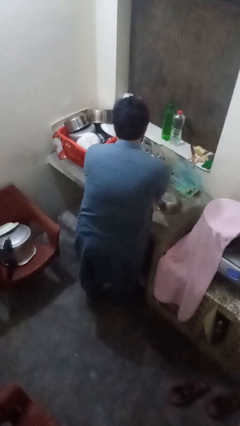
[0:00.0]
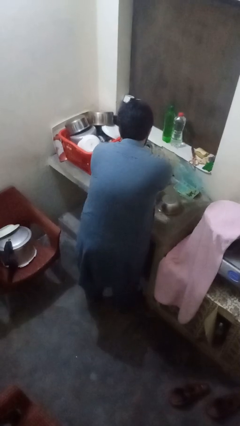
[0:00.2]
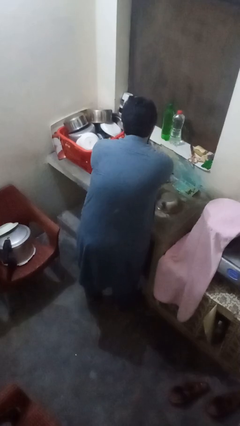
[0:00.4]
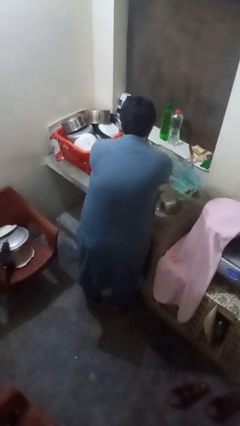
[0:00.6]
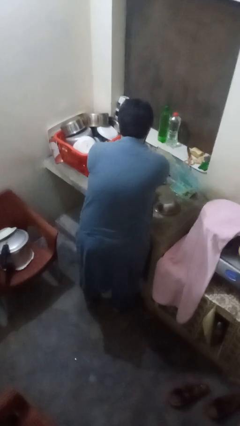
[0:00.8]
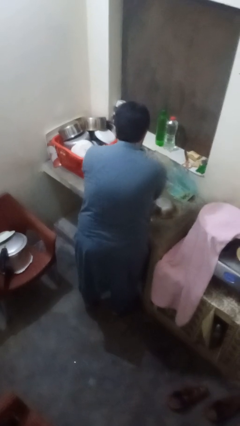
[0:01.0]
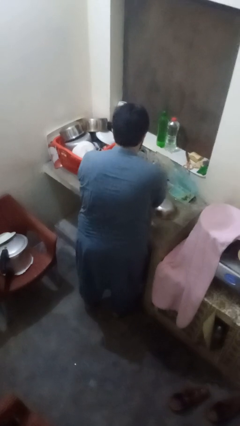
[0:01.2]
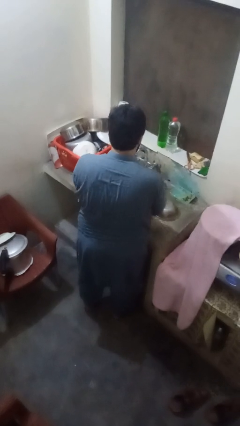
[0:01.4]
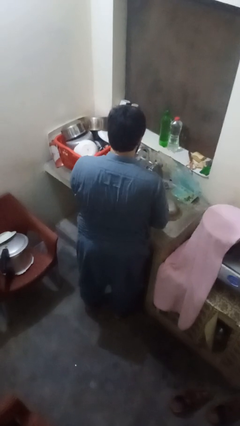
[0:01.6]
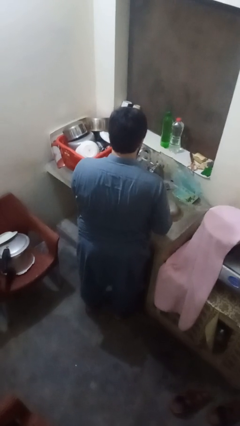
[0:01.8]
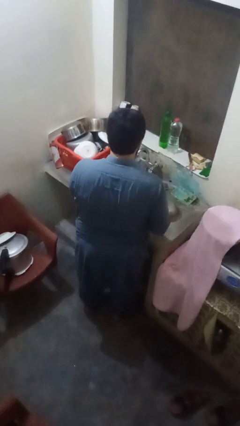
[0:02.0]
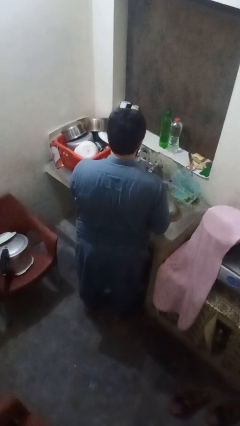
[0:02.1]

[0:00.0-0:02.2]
person washes hands

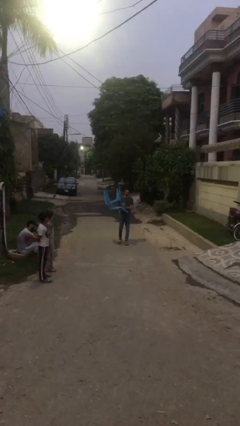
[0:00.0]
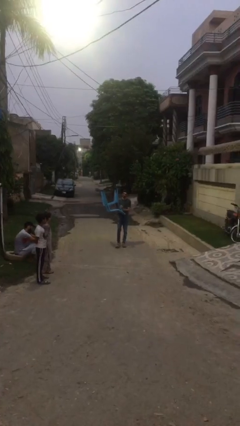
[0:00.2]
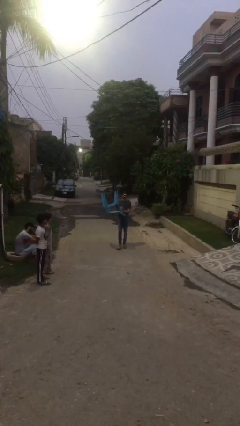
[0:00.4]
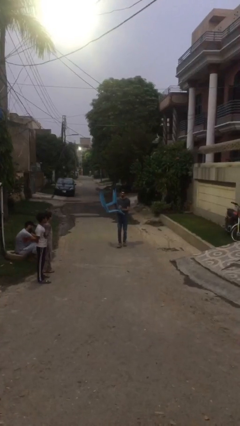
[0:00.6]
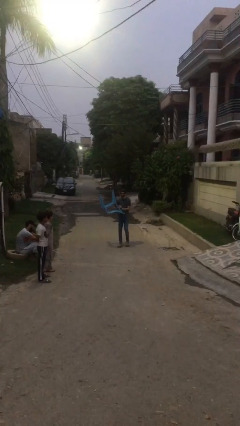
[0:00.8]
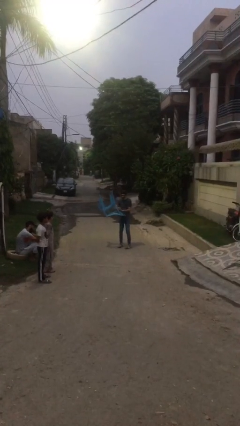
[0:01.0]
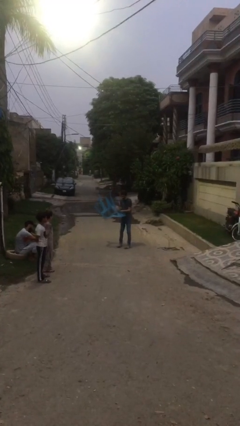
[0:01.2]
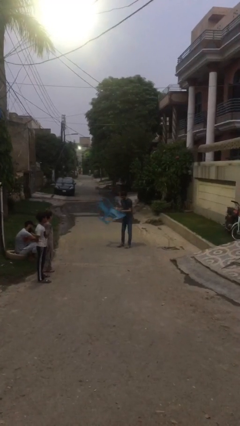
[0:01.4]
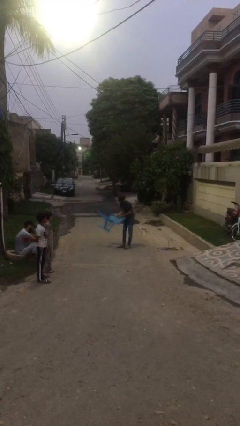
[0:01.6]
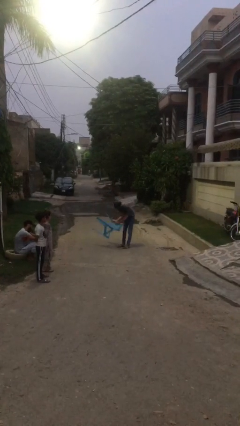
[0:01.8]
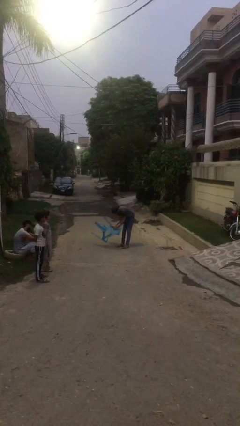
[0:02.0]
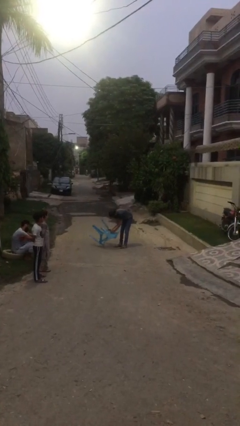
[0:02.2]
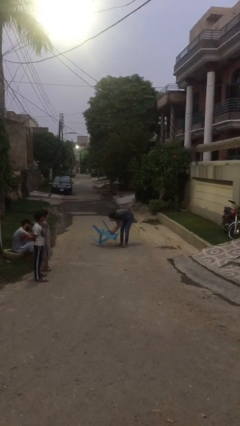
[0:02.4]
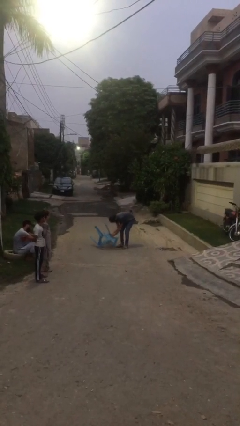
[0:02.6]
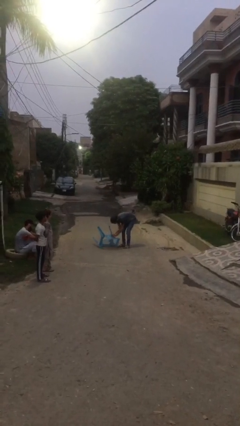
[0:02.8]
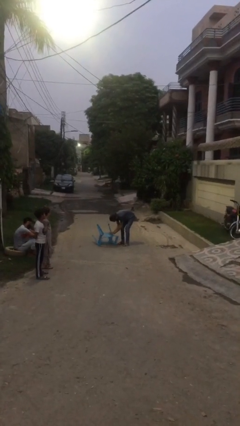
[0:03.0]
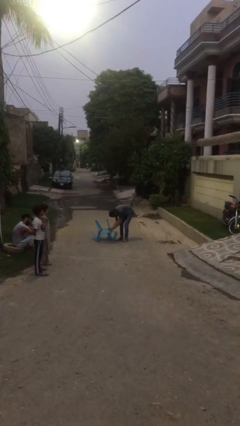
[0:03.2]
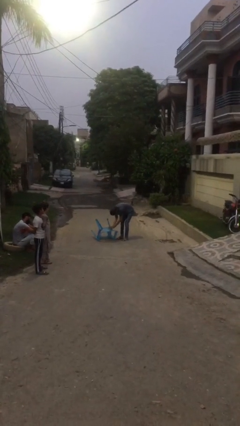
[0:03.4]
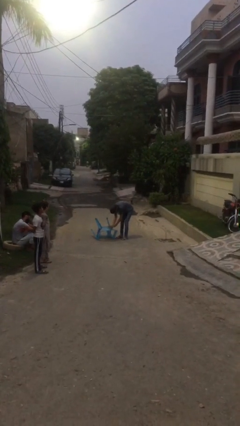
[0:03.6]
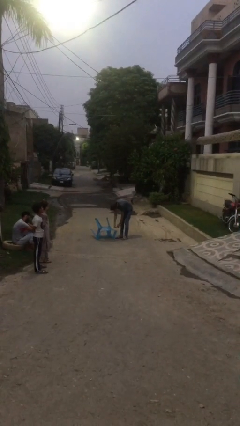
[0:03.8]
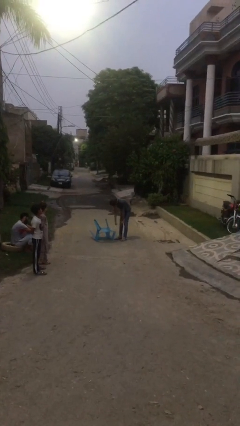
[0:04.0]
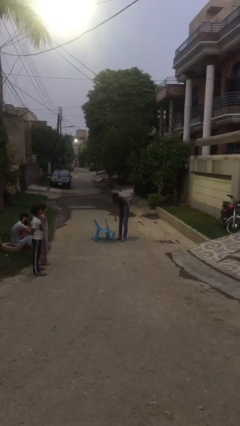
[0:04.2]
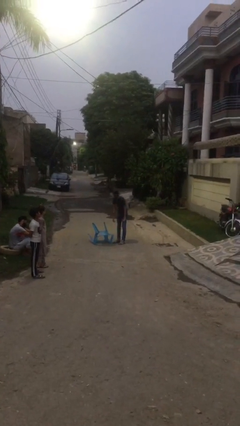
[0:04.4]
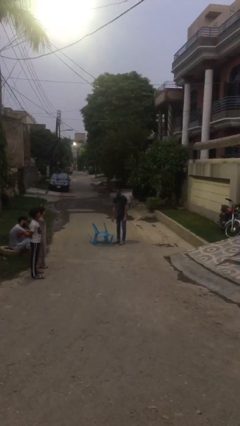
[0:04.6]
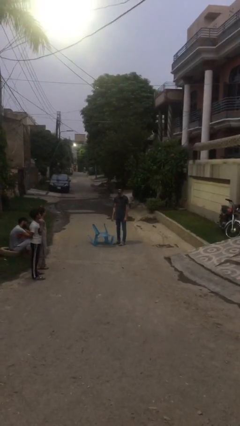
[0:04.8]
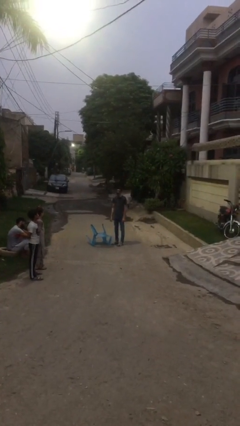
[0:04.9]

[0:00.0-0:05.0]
person puts down object on floor

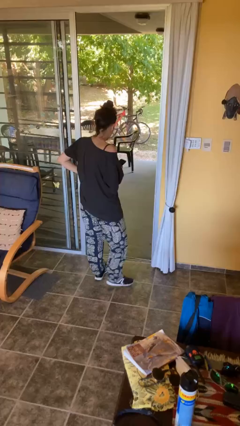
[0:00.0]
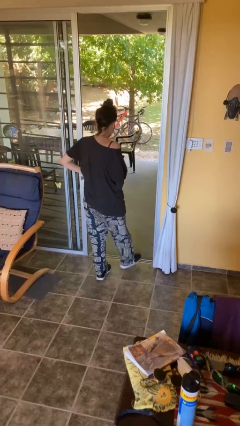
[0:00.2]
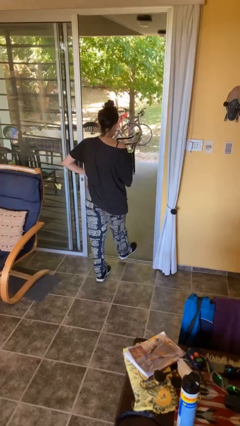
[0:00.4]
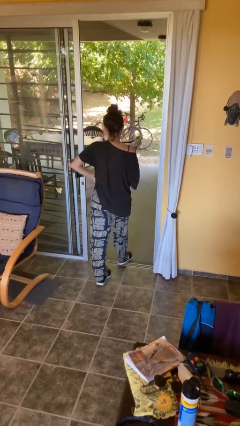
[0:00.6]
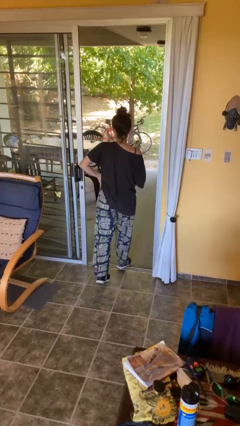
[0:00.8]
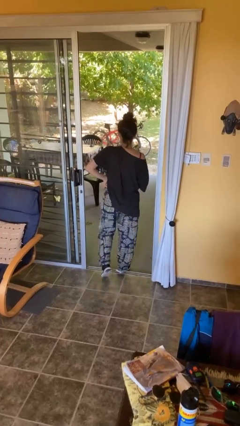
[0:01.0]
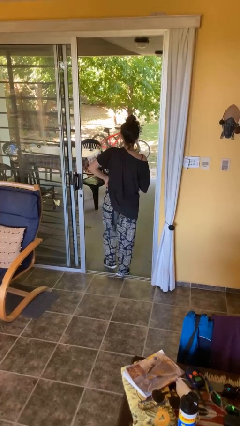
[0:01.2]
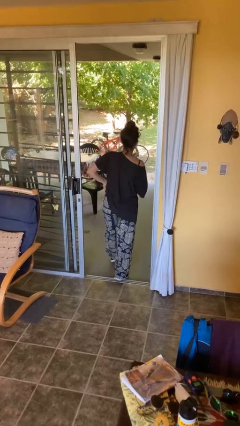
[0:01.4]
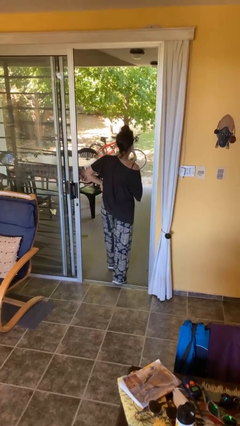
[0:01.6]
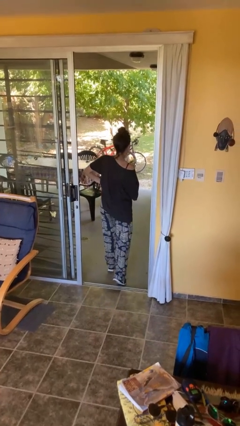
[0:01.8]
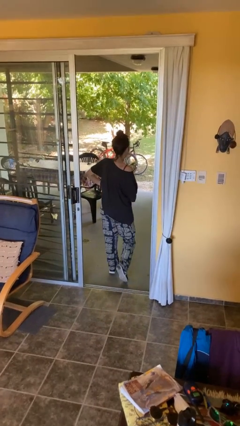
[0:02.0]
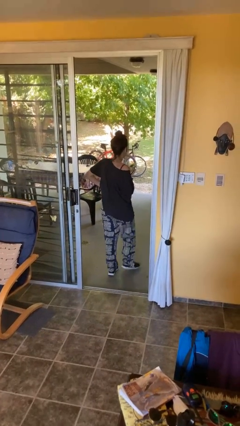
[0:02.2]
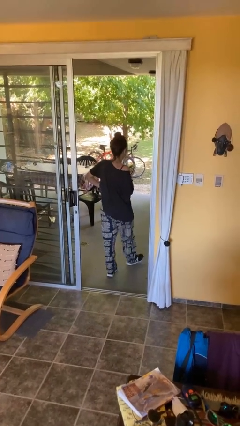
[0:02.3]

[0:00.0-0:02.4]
person exits scene through structure

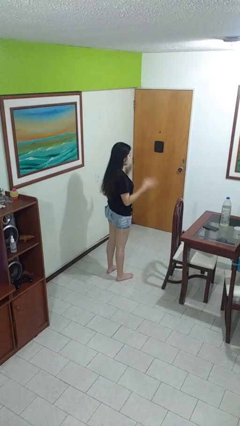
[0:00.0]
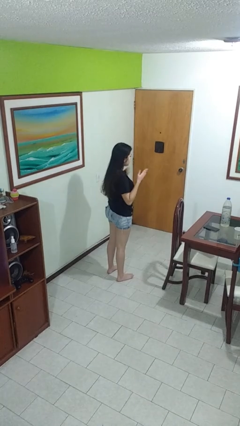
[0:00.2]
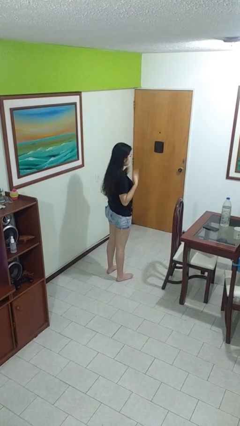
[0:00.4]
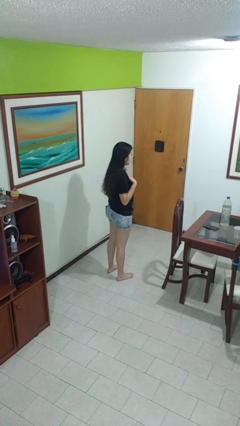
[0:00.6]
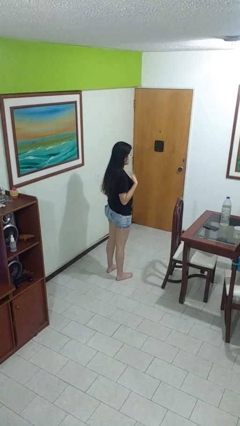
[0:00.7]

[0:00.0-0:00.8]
person drums on chest

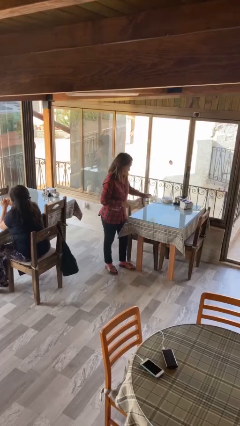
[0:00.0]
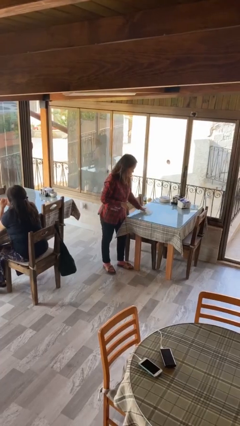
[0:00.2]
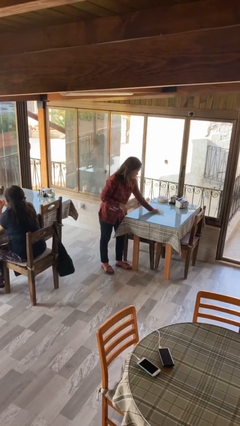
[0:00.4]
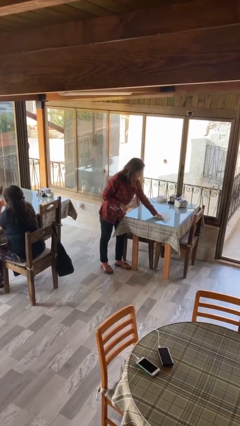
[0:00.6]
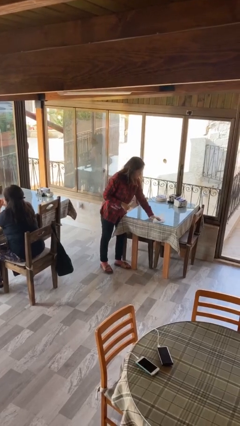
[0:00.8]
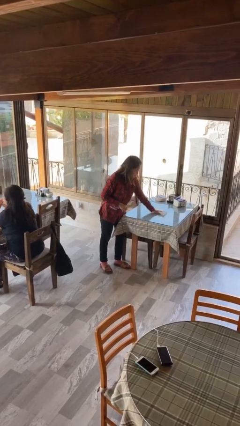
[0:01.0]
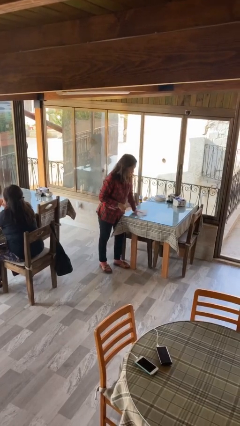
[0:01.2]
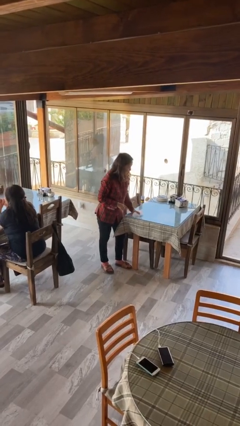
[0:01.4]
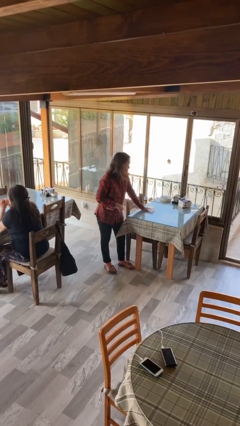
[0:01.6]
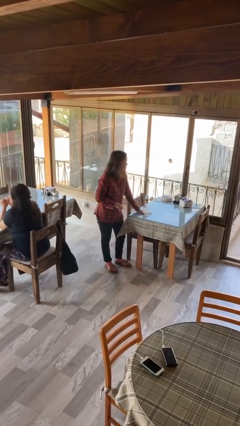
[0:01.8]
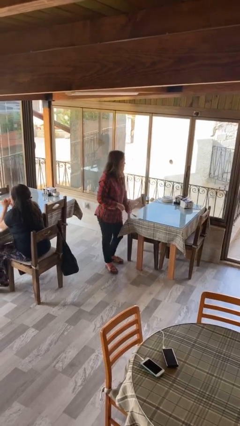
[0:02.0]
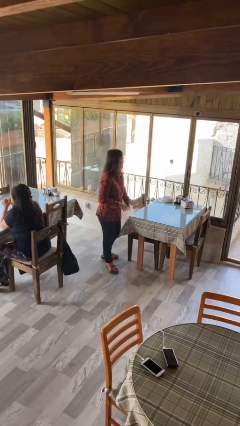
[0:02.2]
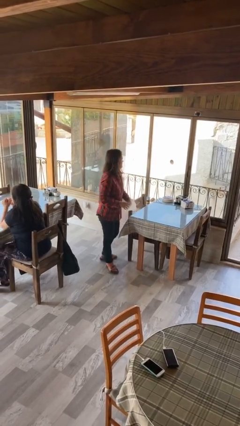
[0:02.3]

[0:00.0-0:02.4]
person cleans table with rag

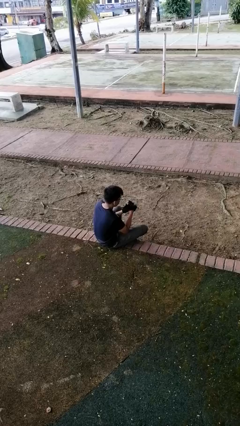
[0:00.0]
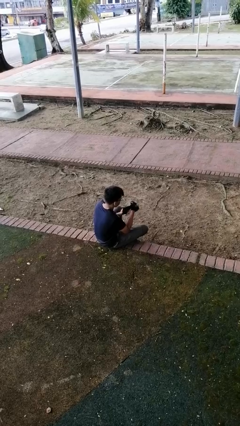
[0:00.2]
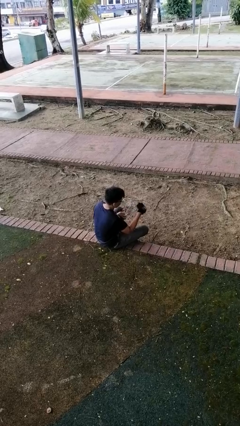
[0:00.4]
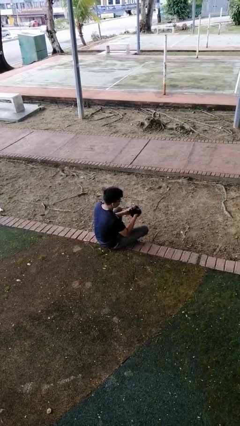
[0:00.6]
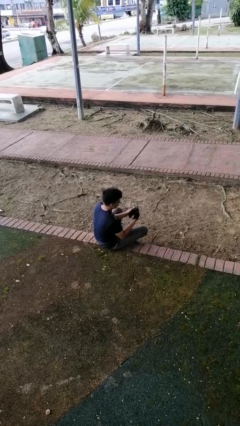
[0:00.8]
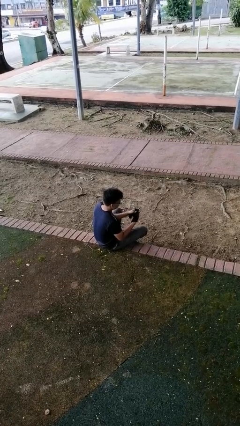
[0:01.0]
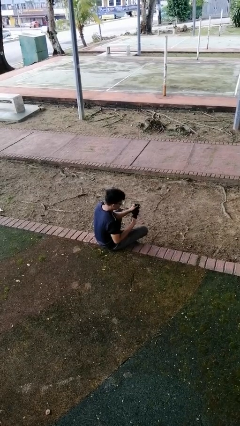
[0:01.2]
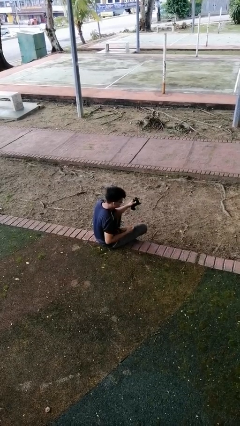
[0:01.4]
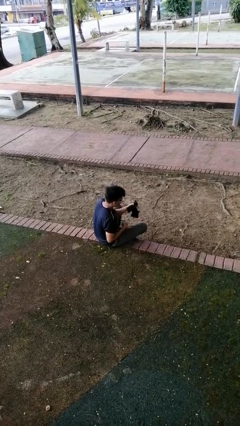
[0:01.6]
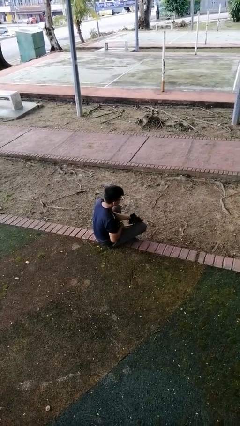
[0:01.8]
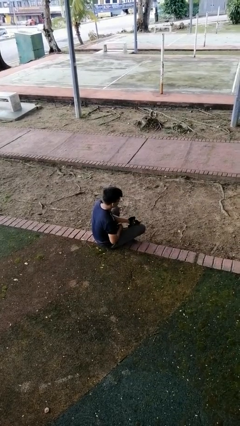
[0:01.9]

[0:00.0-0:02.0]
person takes off gloves

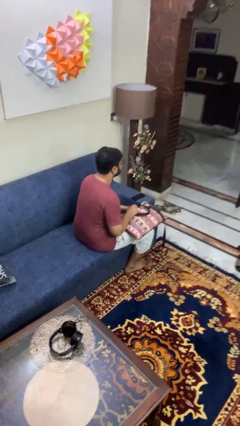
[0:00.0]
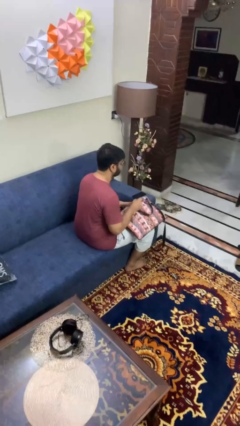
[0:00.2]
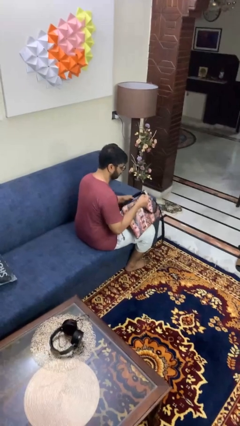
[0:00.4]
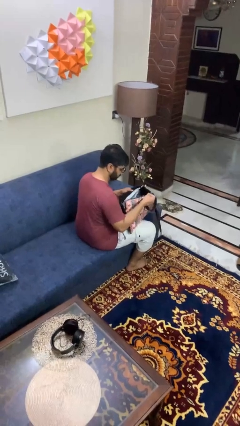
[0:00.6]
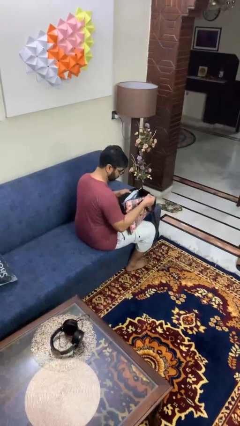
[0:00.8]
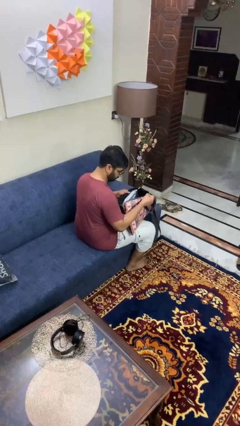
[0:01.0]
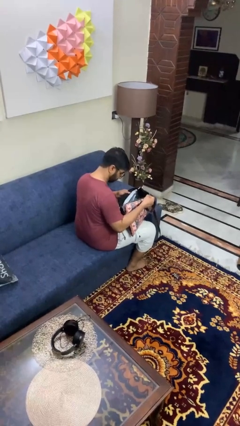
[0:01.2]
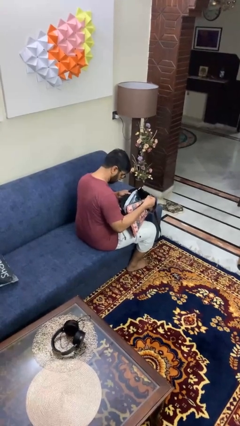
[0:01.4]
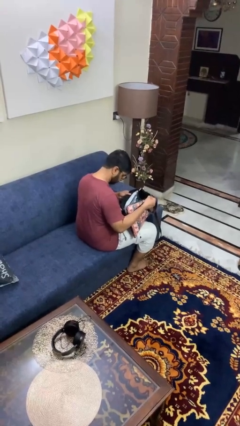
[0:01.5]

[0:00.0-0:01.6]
person searches in purse

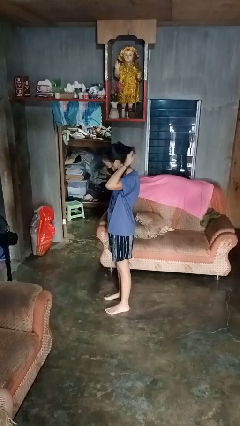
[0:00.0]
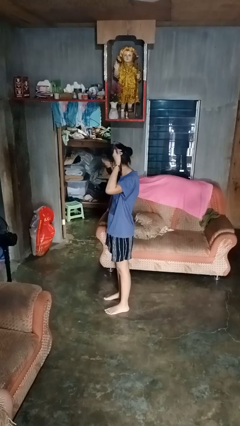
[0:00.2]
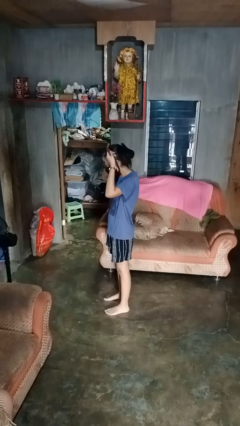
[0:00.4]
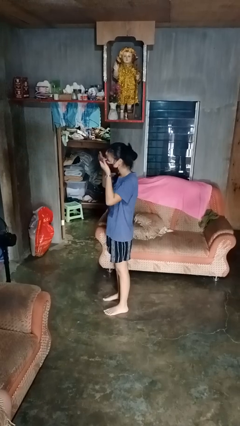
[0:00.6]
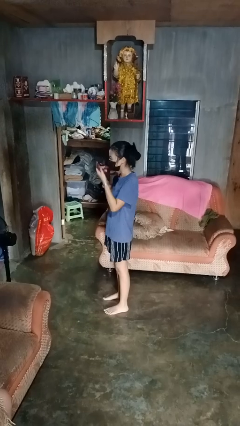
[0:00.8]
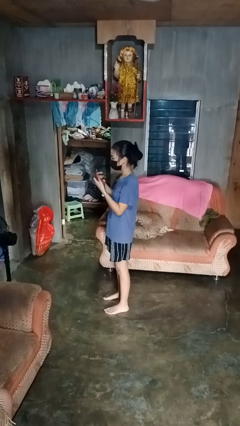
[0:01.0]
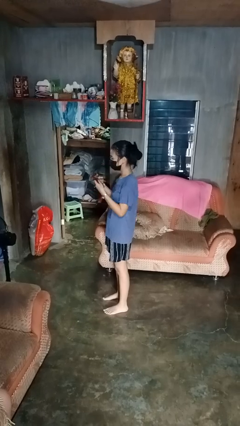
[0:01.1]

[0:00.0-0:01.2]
person takes off necklace
